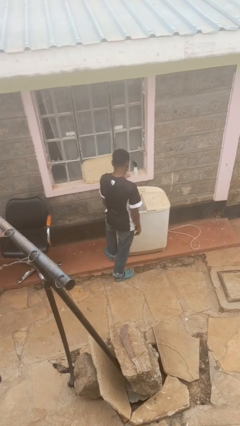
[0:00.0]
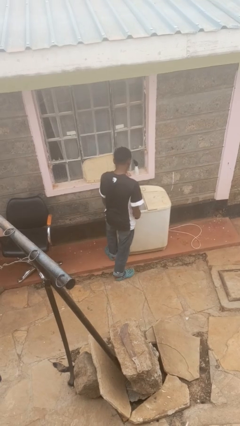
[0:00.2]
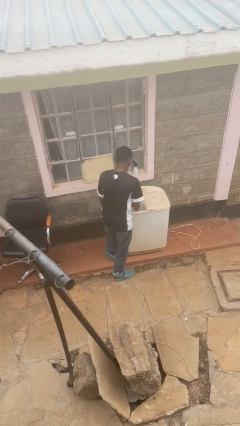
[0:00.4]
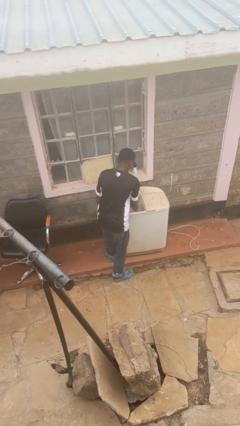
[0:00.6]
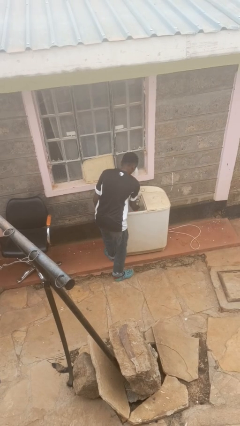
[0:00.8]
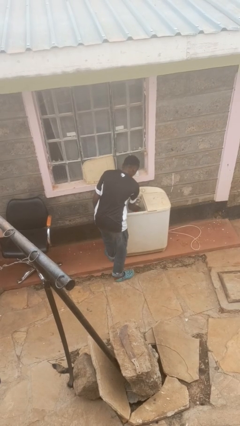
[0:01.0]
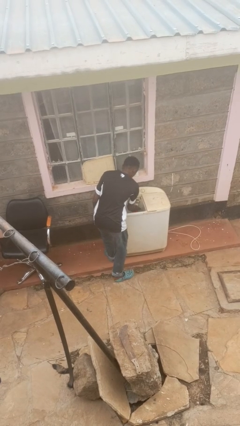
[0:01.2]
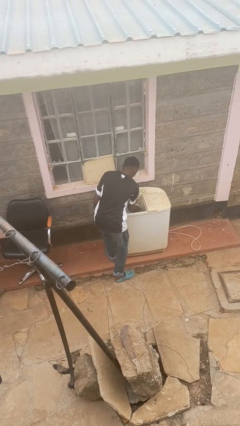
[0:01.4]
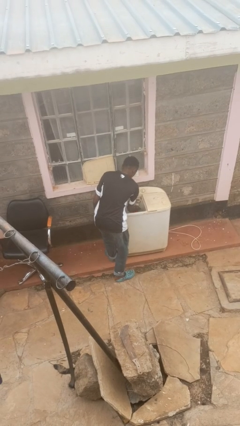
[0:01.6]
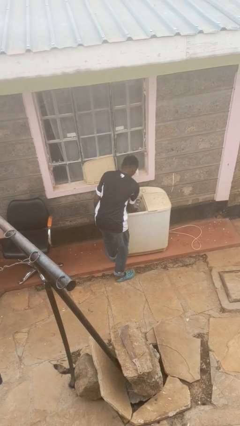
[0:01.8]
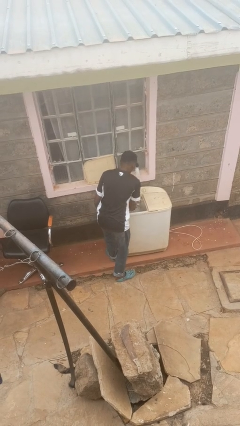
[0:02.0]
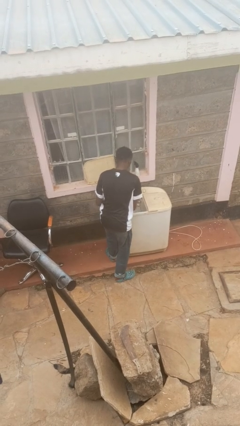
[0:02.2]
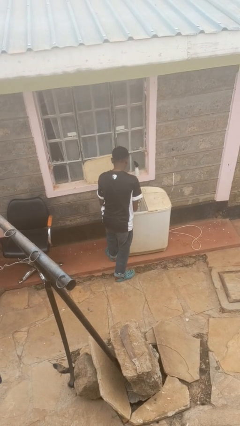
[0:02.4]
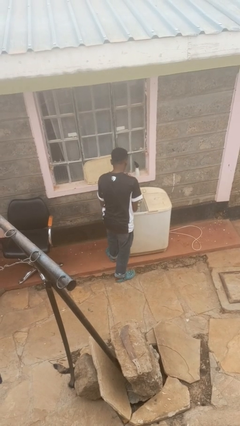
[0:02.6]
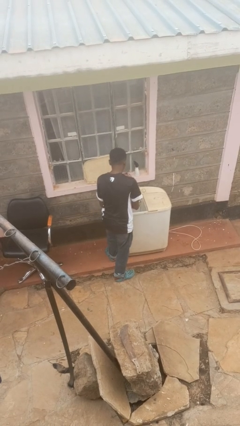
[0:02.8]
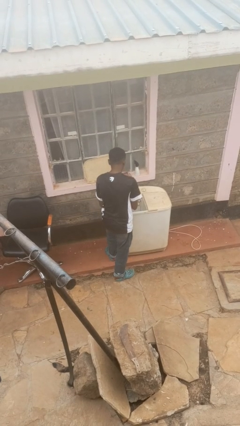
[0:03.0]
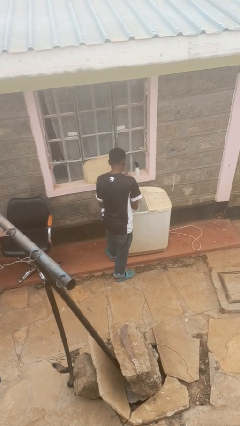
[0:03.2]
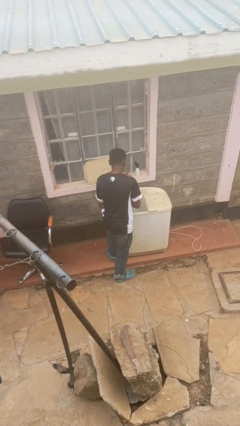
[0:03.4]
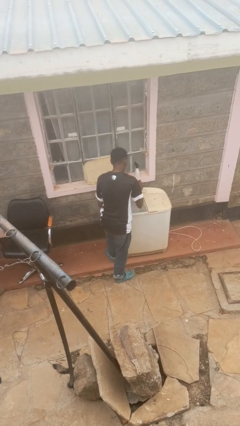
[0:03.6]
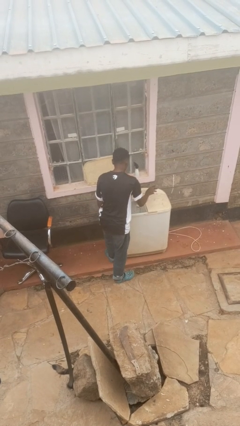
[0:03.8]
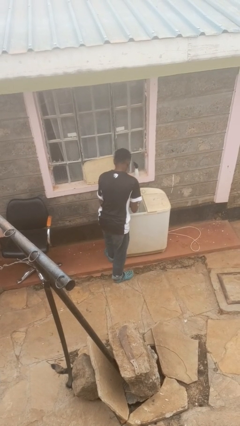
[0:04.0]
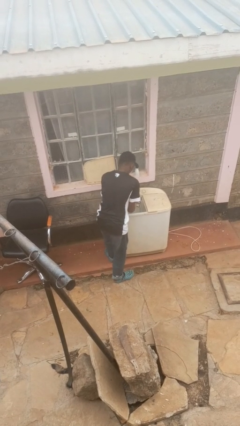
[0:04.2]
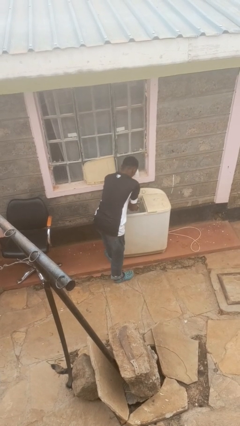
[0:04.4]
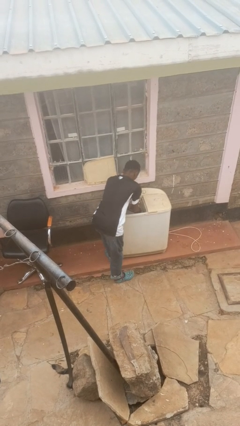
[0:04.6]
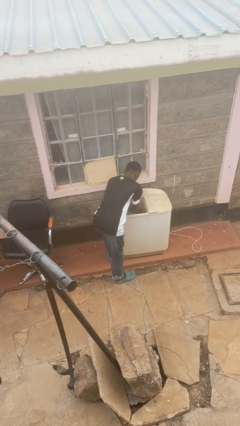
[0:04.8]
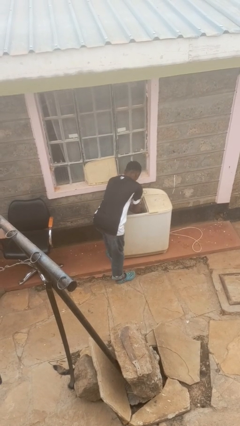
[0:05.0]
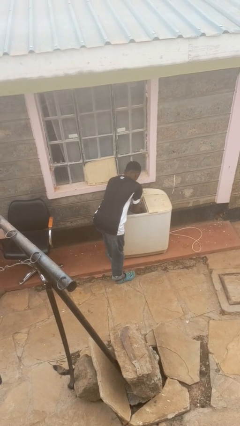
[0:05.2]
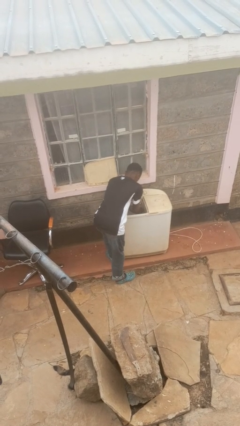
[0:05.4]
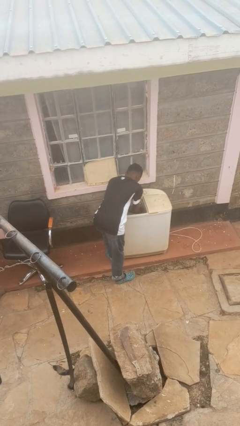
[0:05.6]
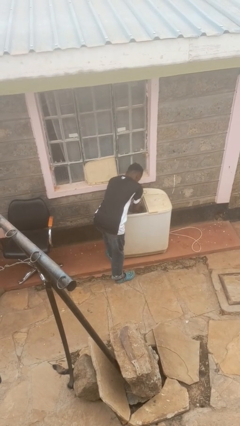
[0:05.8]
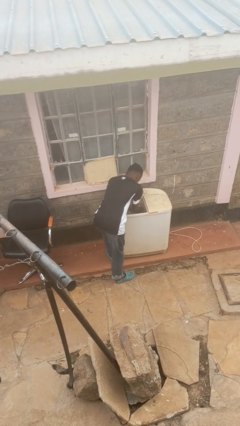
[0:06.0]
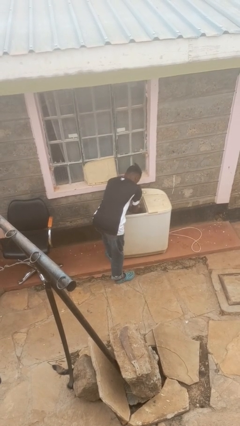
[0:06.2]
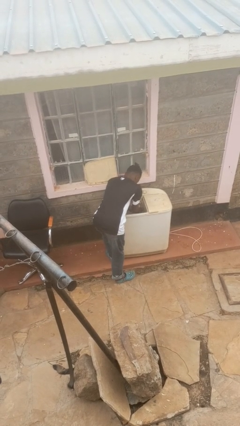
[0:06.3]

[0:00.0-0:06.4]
person cleans dryer lint trap

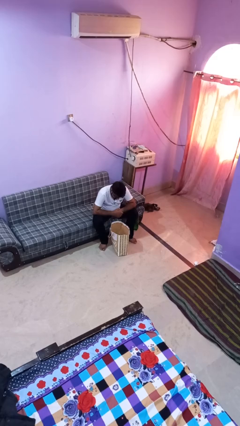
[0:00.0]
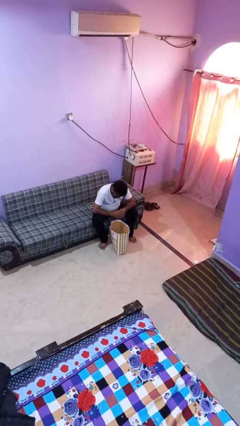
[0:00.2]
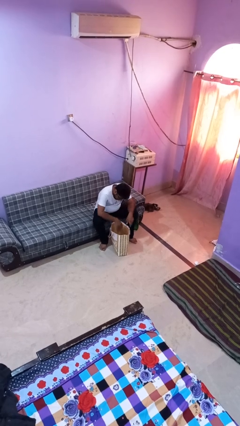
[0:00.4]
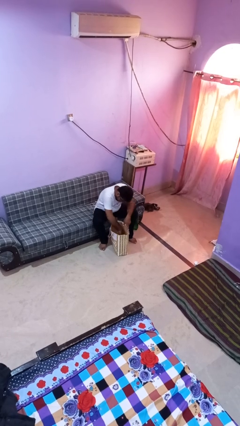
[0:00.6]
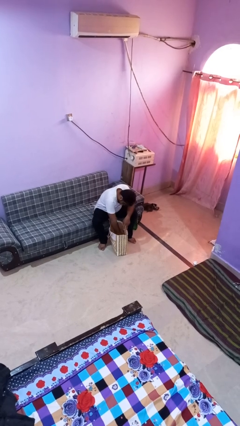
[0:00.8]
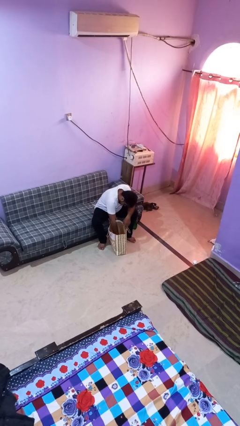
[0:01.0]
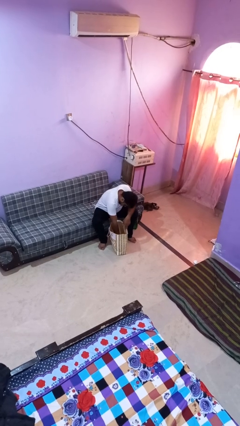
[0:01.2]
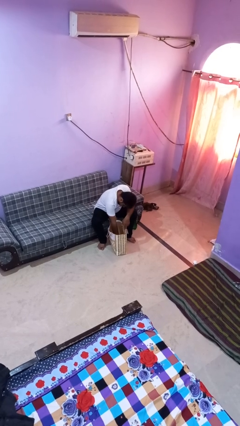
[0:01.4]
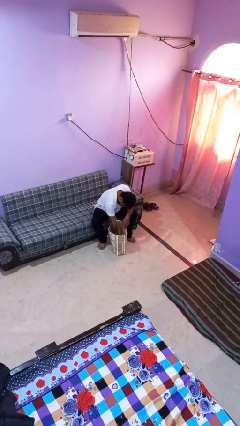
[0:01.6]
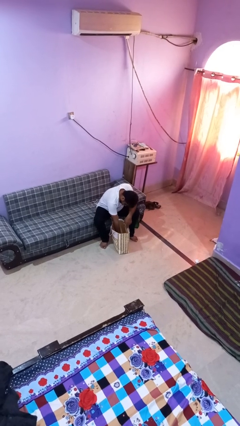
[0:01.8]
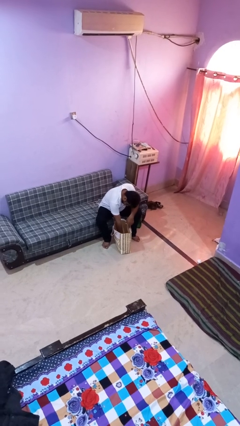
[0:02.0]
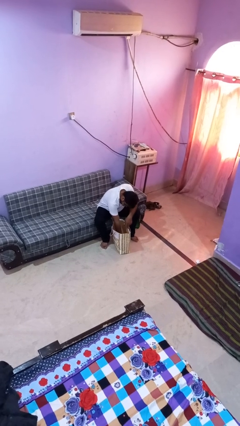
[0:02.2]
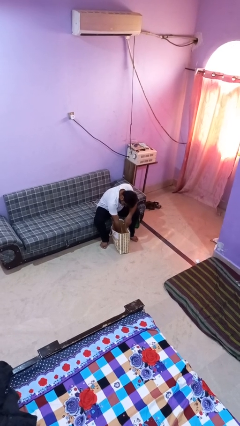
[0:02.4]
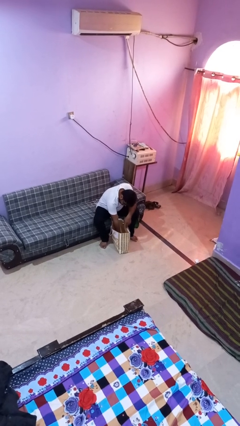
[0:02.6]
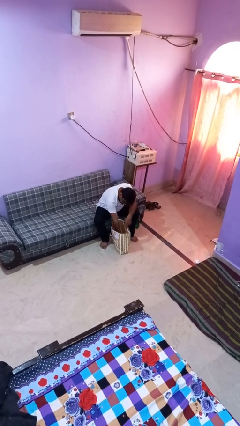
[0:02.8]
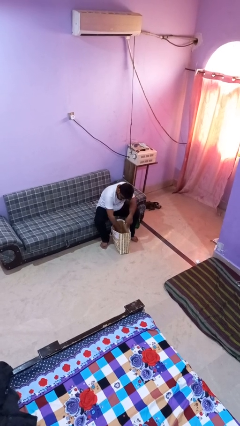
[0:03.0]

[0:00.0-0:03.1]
person searches in bag

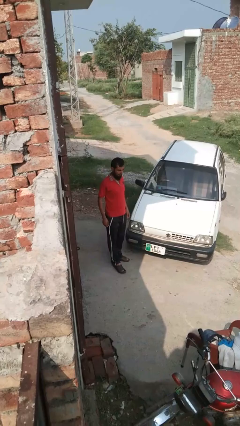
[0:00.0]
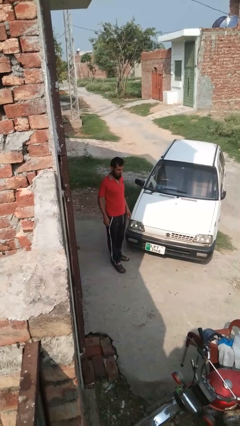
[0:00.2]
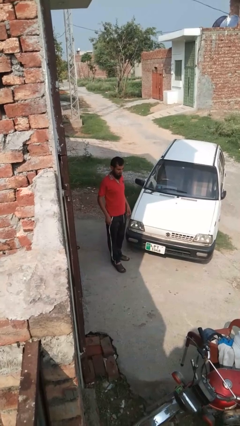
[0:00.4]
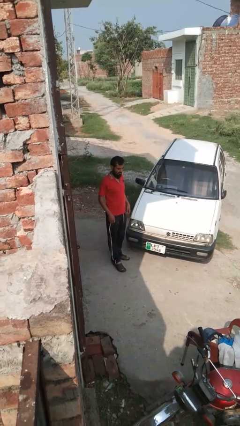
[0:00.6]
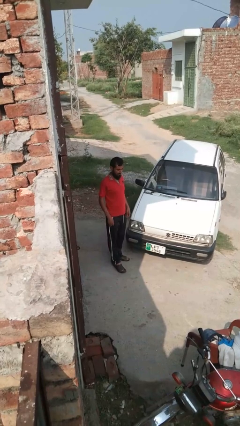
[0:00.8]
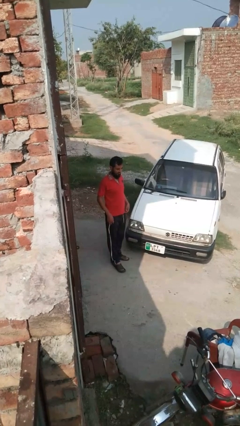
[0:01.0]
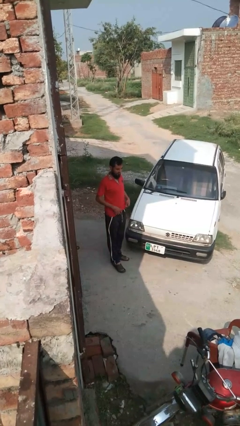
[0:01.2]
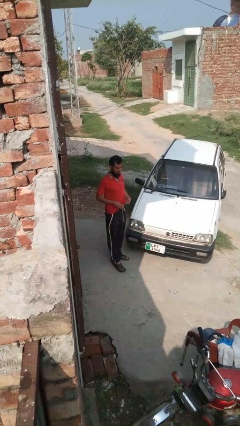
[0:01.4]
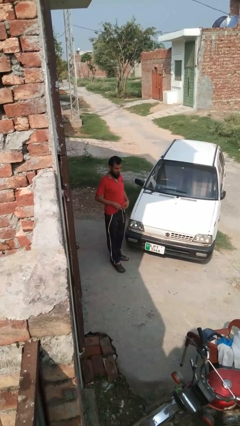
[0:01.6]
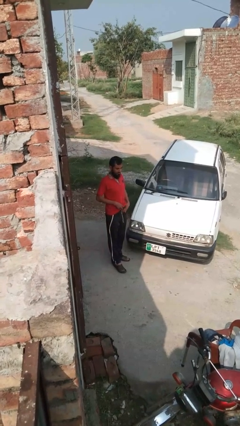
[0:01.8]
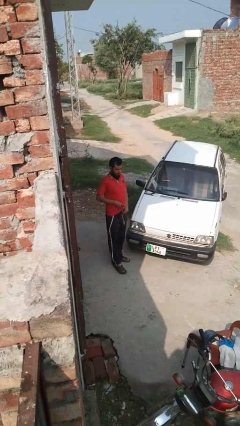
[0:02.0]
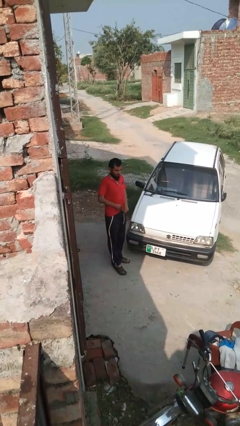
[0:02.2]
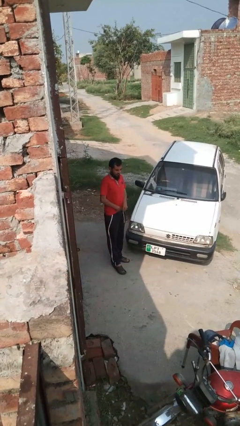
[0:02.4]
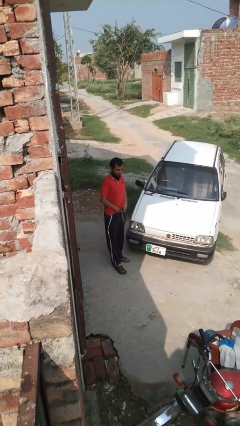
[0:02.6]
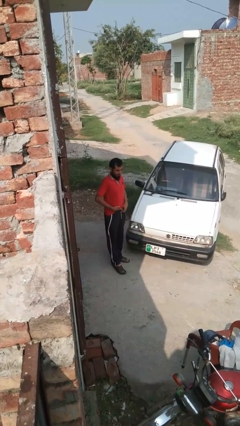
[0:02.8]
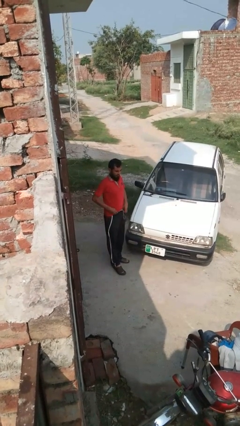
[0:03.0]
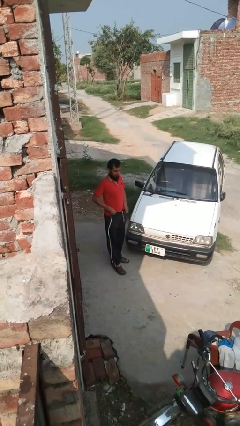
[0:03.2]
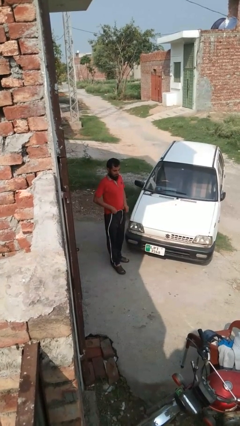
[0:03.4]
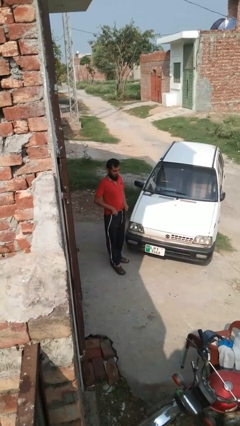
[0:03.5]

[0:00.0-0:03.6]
person tucks in shirt

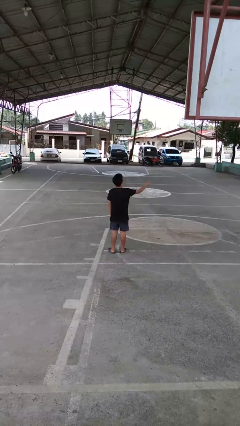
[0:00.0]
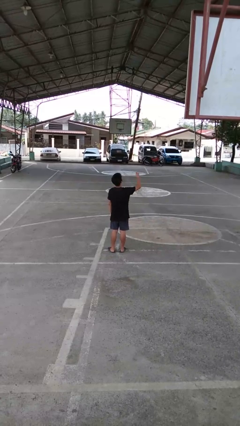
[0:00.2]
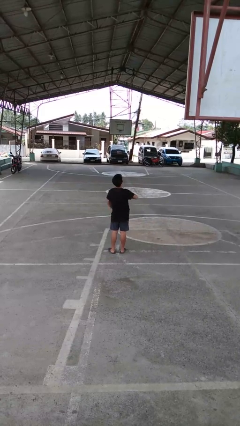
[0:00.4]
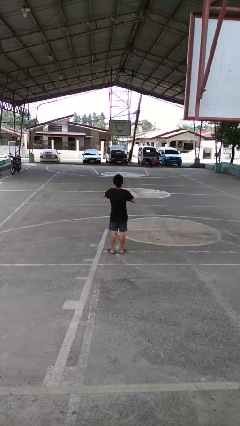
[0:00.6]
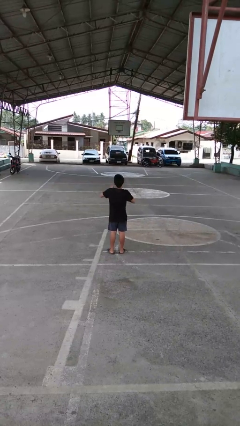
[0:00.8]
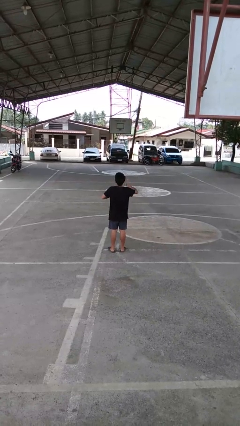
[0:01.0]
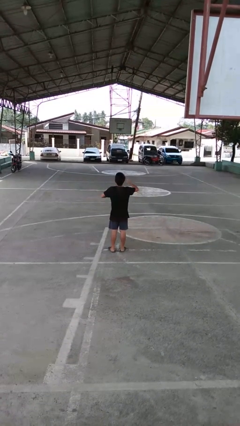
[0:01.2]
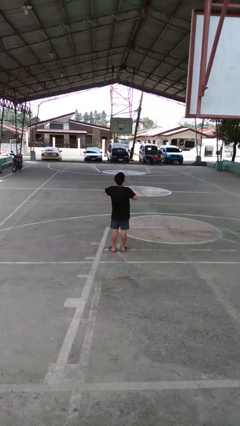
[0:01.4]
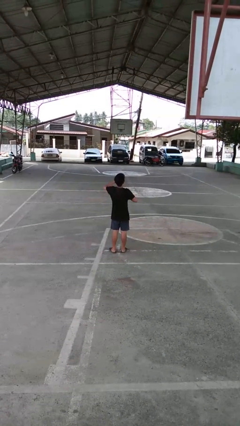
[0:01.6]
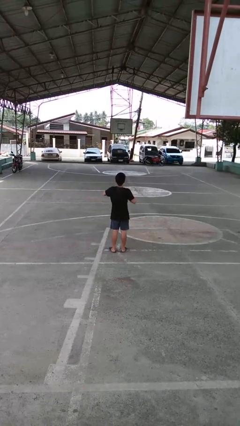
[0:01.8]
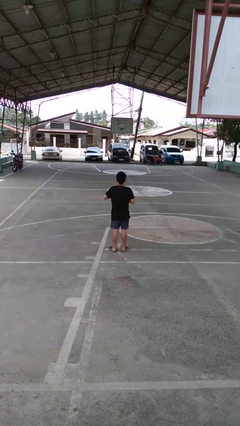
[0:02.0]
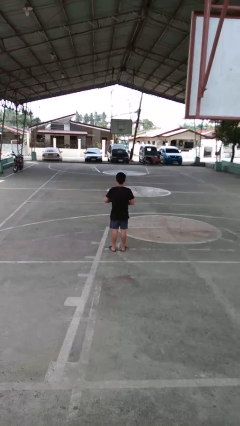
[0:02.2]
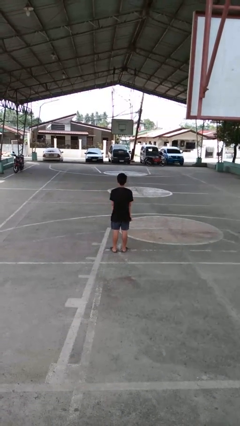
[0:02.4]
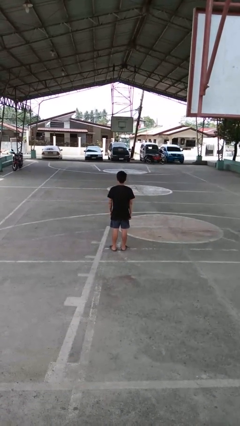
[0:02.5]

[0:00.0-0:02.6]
person drums on chest

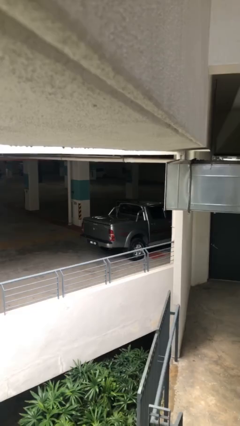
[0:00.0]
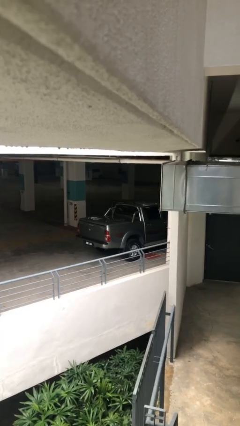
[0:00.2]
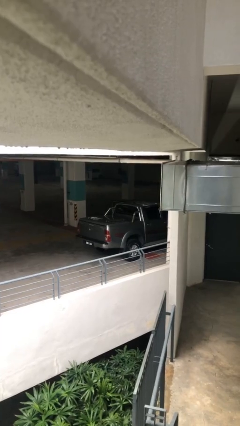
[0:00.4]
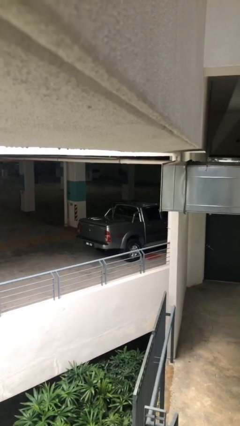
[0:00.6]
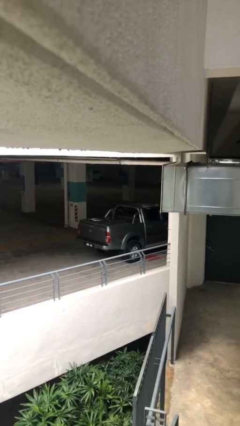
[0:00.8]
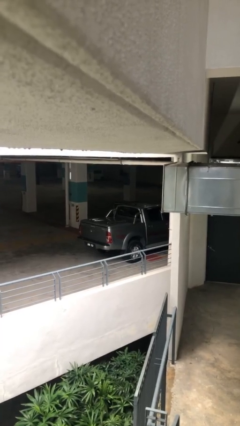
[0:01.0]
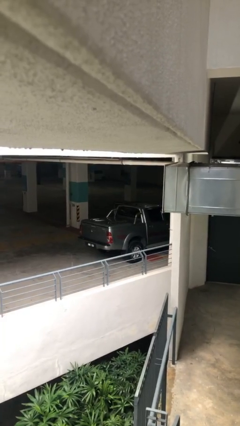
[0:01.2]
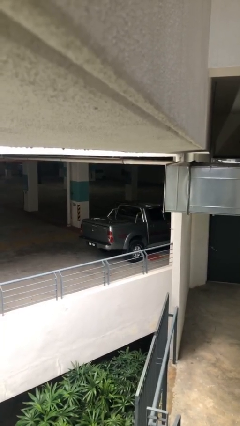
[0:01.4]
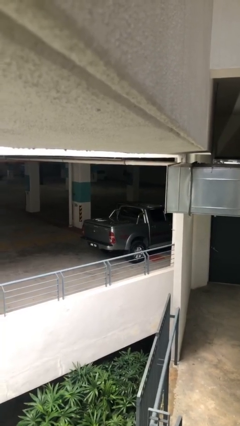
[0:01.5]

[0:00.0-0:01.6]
person enters car

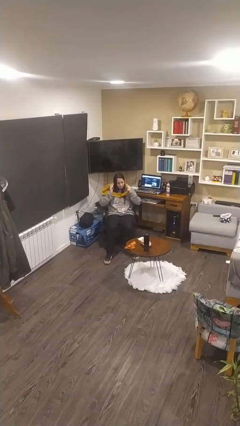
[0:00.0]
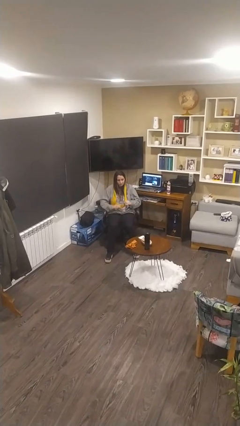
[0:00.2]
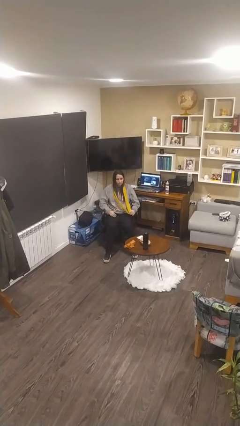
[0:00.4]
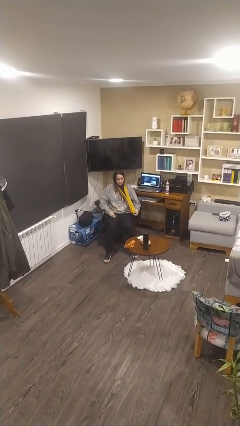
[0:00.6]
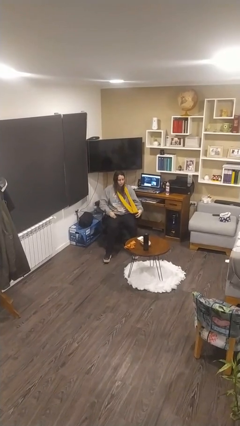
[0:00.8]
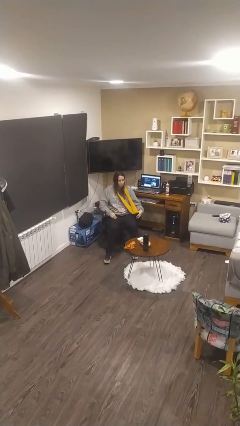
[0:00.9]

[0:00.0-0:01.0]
person puts on scarf
